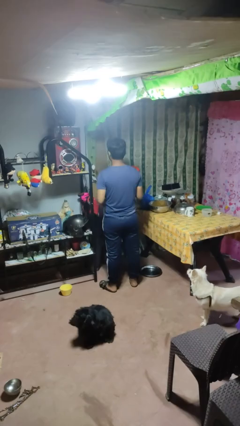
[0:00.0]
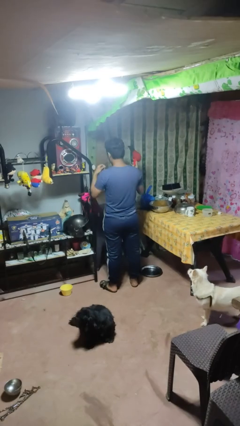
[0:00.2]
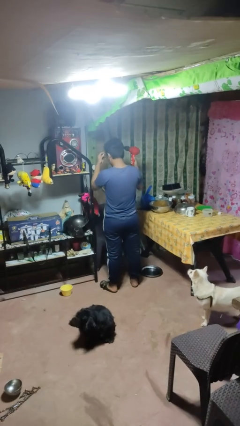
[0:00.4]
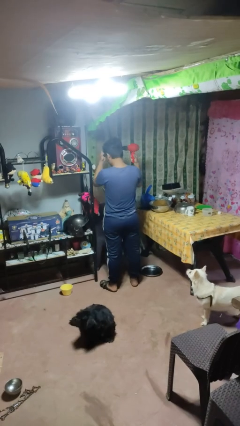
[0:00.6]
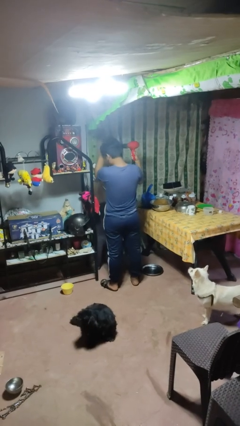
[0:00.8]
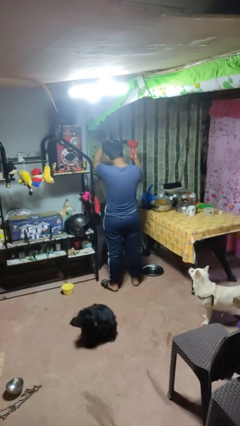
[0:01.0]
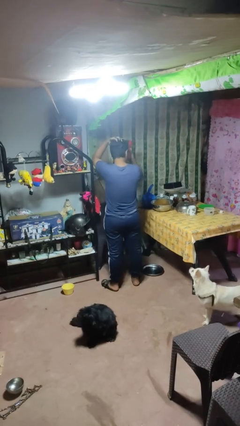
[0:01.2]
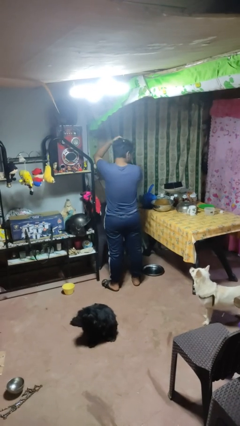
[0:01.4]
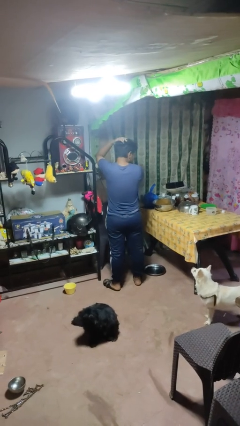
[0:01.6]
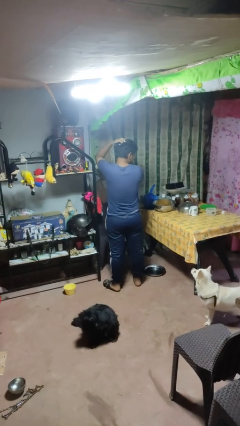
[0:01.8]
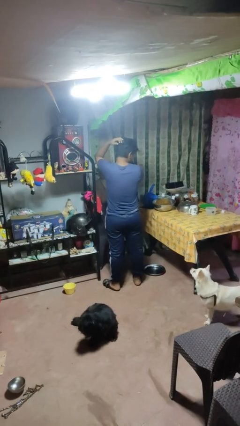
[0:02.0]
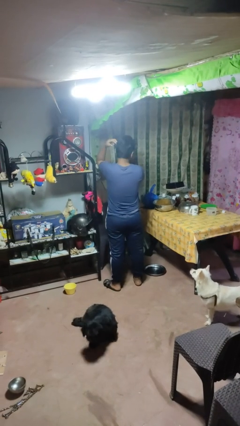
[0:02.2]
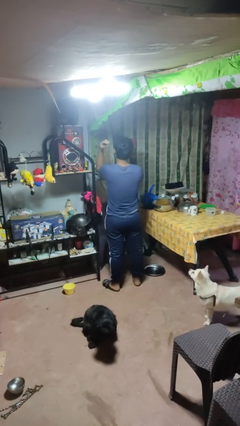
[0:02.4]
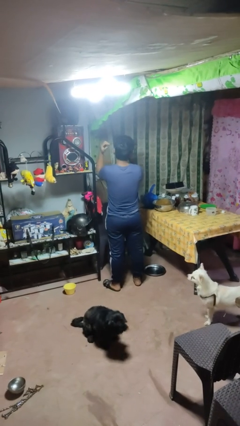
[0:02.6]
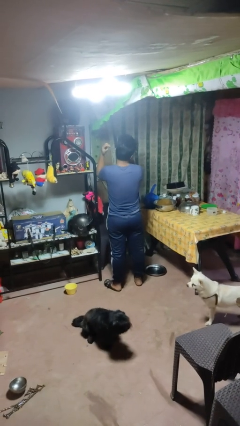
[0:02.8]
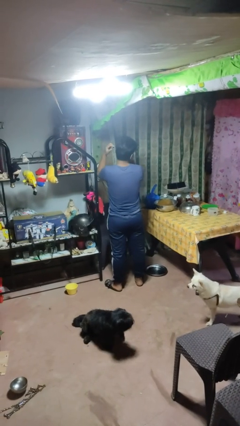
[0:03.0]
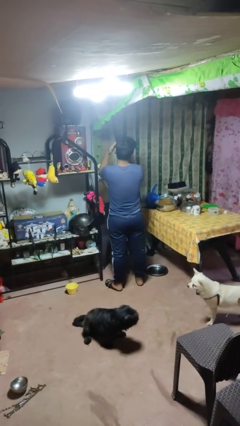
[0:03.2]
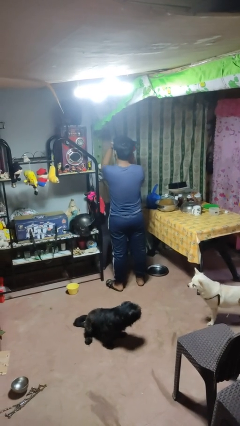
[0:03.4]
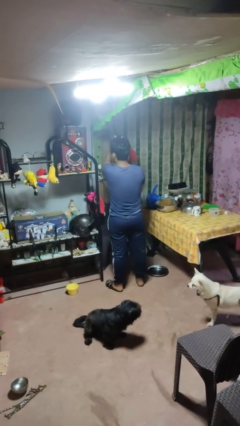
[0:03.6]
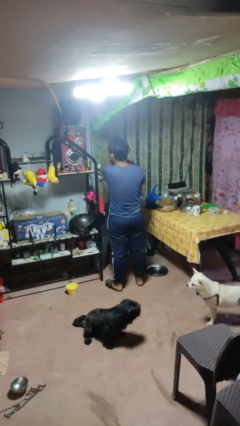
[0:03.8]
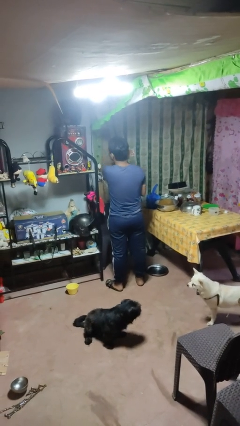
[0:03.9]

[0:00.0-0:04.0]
person dries hair with hairdryer

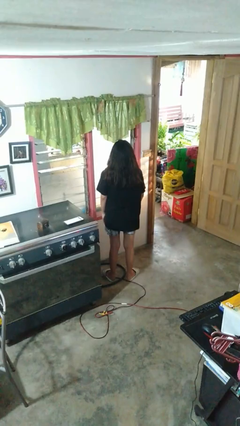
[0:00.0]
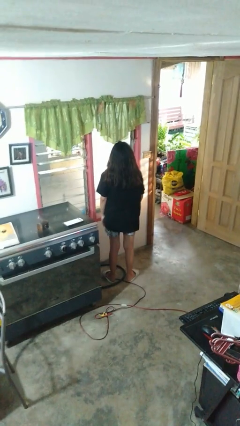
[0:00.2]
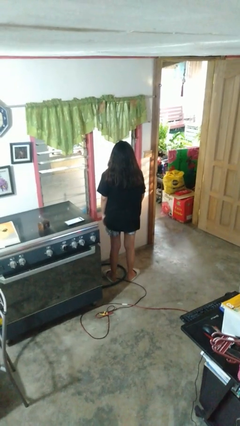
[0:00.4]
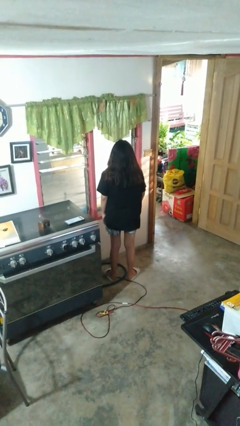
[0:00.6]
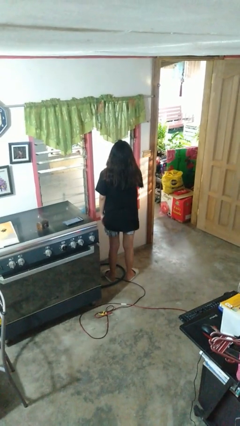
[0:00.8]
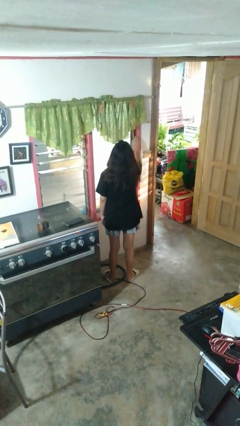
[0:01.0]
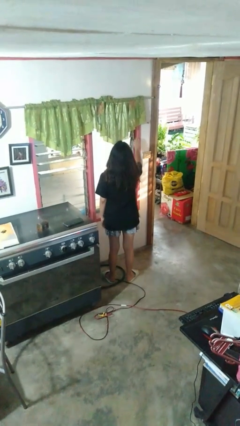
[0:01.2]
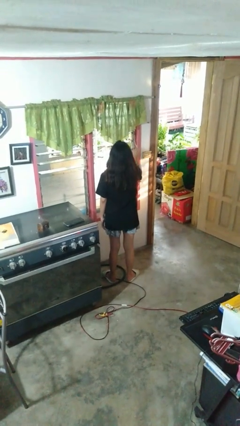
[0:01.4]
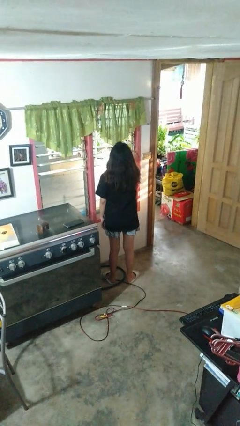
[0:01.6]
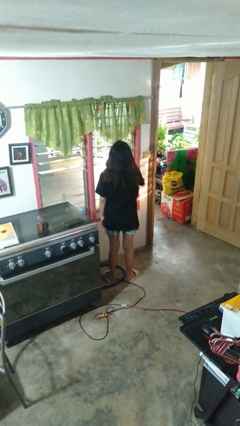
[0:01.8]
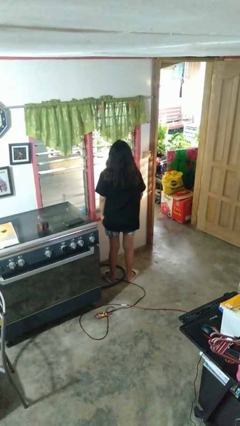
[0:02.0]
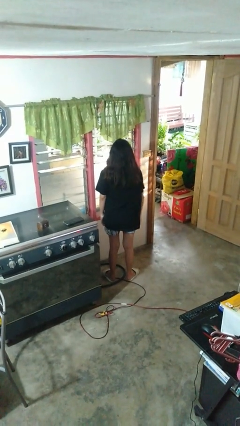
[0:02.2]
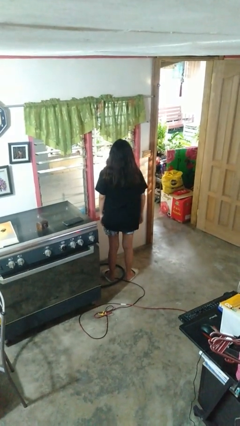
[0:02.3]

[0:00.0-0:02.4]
person opens home window

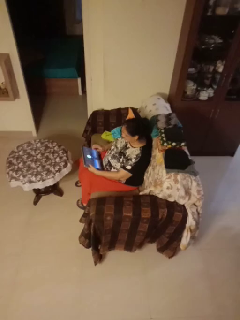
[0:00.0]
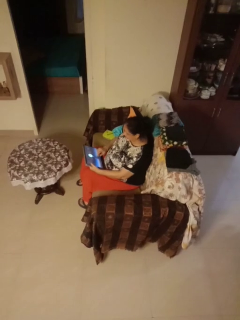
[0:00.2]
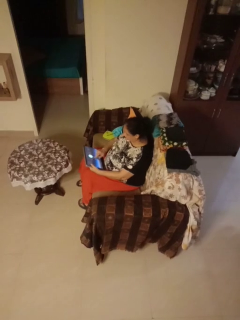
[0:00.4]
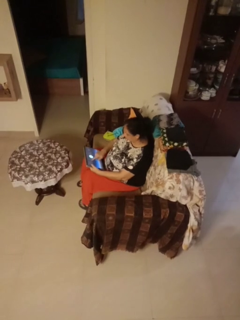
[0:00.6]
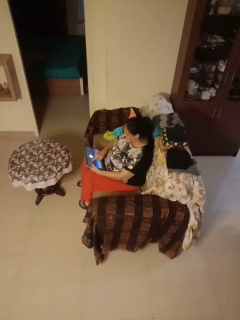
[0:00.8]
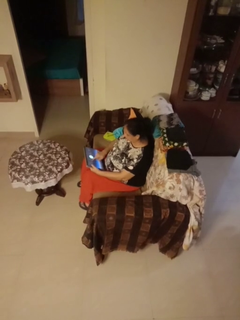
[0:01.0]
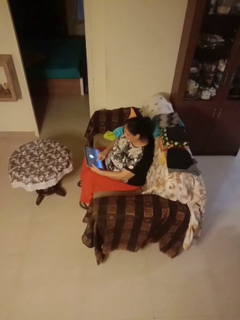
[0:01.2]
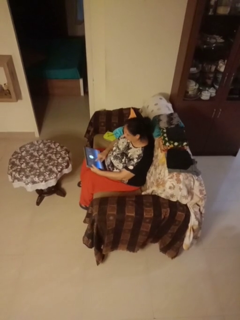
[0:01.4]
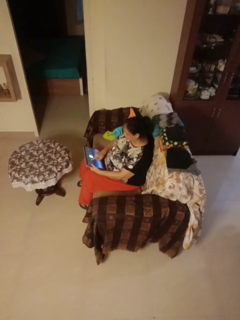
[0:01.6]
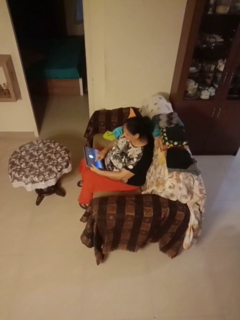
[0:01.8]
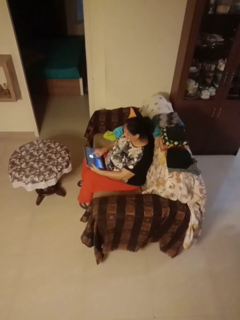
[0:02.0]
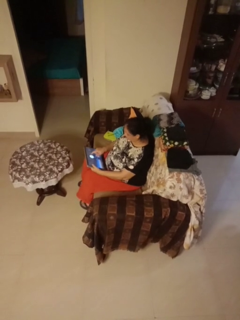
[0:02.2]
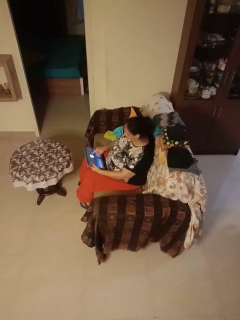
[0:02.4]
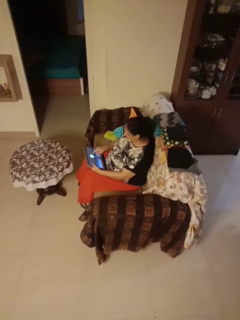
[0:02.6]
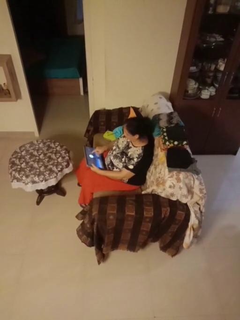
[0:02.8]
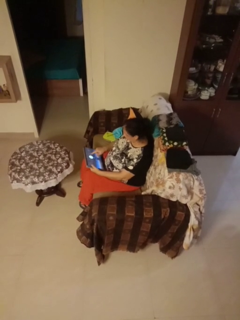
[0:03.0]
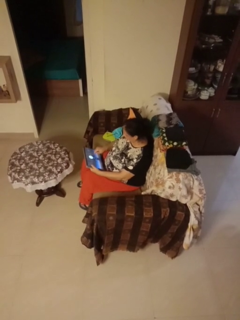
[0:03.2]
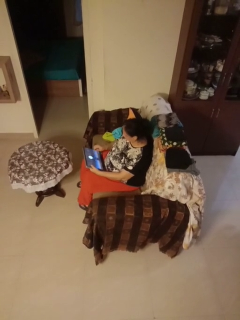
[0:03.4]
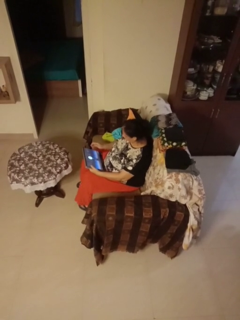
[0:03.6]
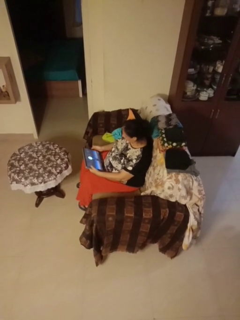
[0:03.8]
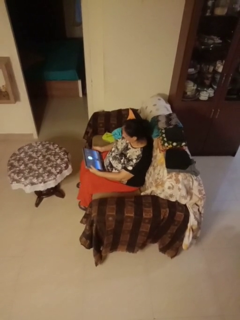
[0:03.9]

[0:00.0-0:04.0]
person interacts with tablet

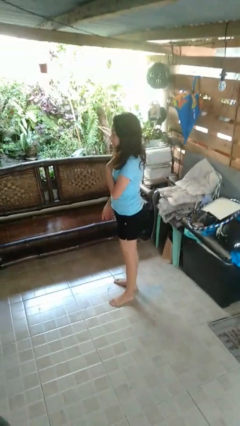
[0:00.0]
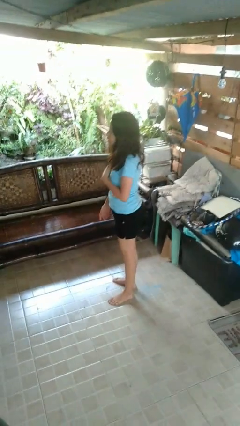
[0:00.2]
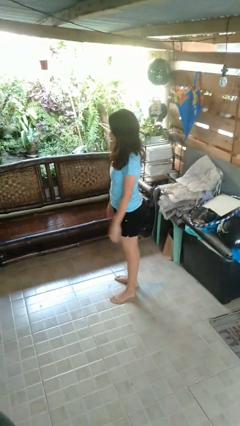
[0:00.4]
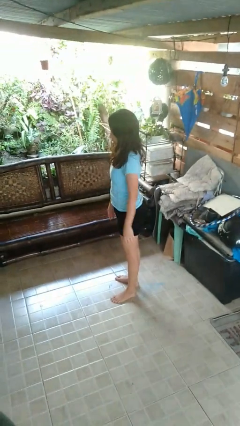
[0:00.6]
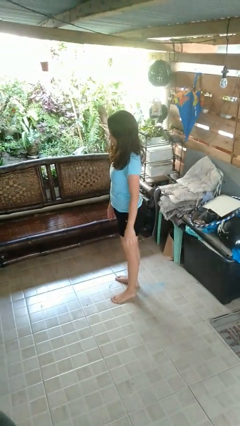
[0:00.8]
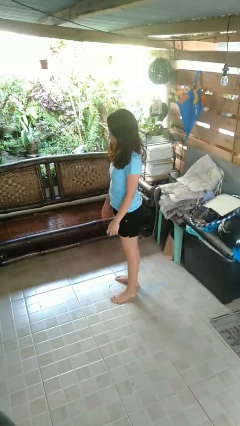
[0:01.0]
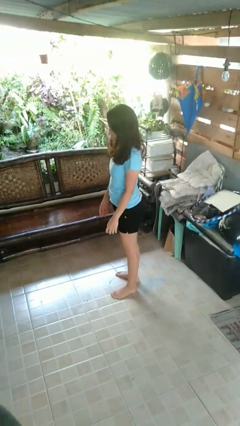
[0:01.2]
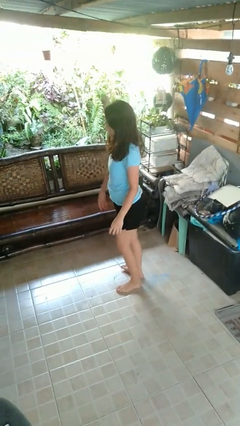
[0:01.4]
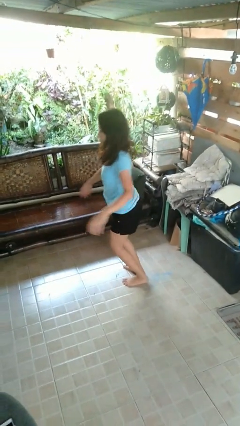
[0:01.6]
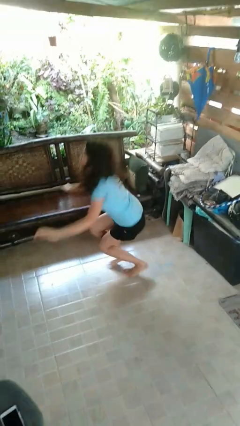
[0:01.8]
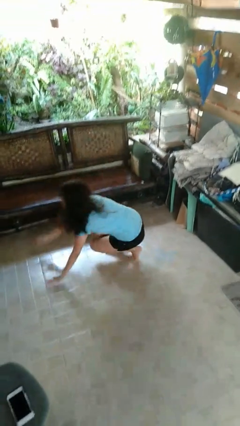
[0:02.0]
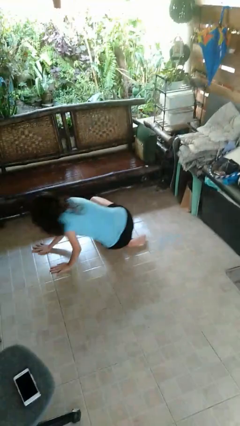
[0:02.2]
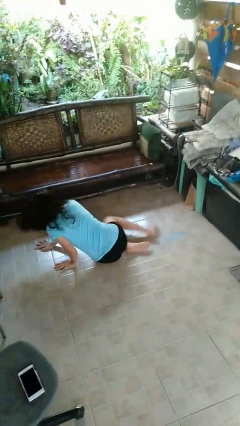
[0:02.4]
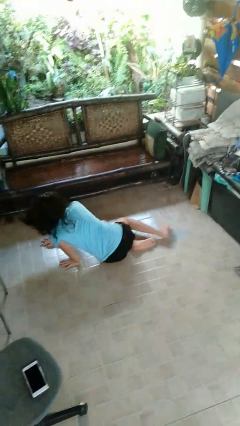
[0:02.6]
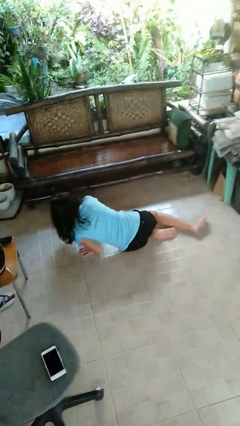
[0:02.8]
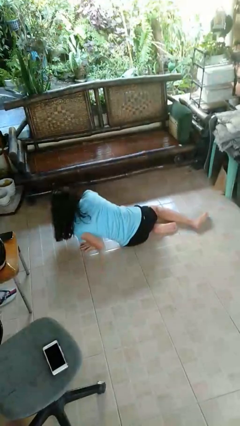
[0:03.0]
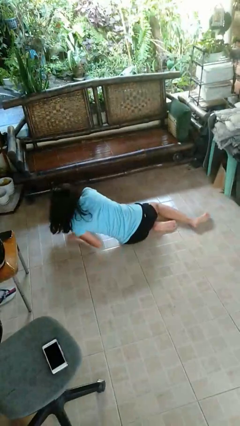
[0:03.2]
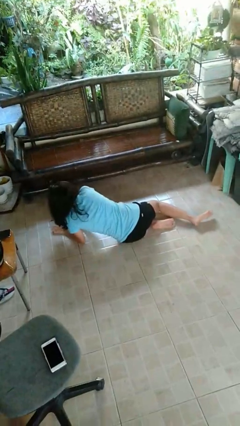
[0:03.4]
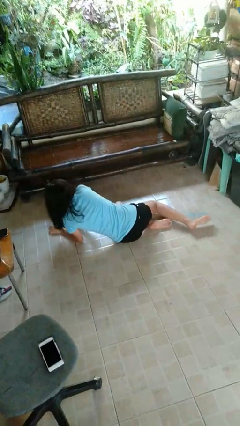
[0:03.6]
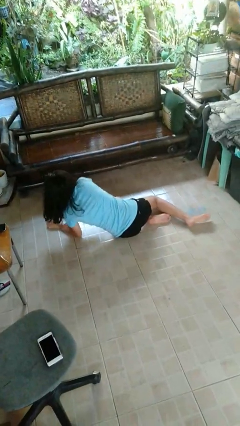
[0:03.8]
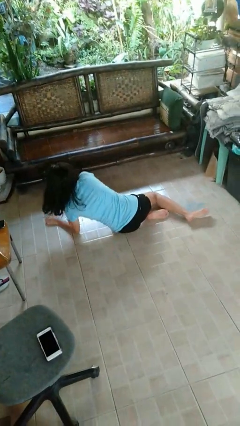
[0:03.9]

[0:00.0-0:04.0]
person falls while standing

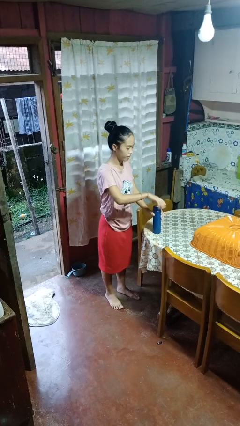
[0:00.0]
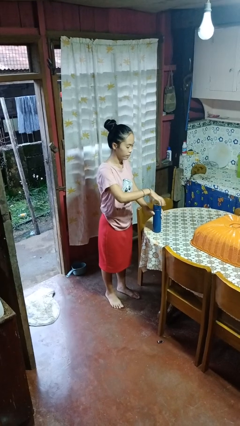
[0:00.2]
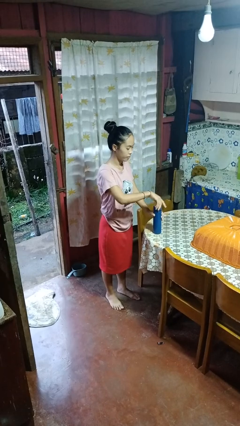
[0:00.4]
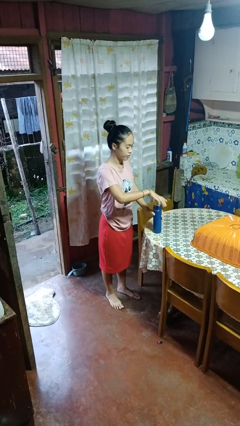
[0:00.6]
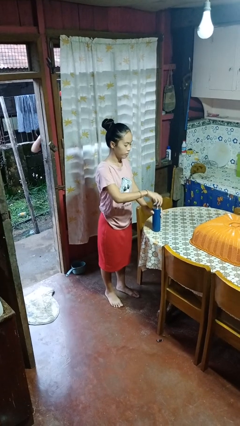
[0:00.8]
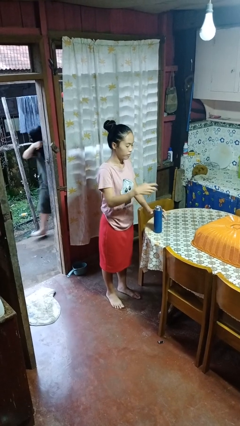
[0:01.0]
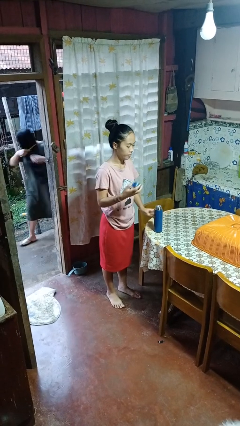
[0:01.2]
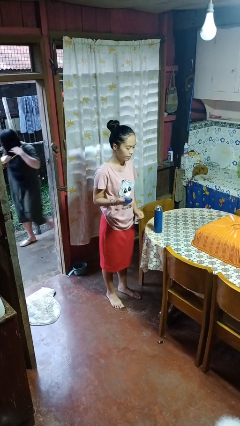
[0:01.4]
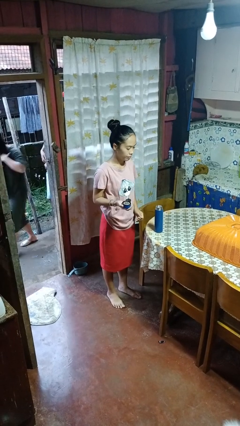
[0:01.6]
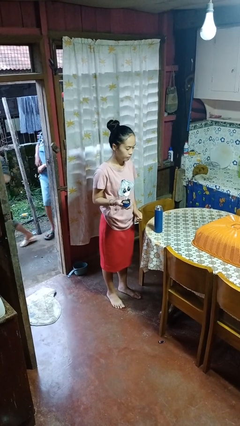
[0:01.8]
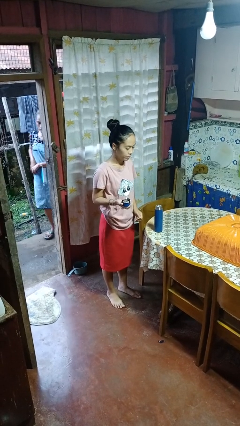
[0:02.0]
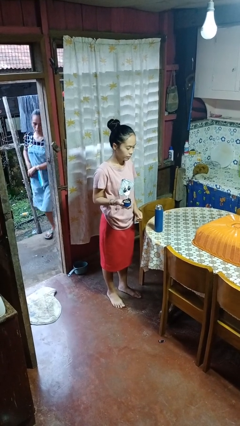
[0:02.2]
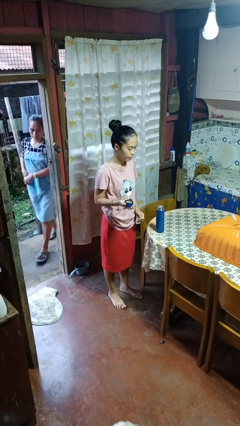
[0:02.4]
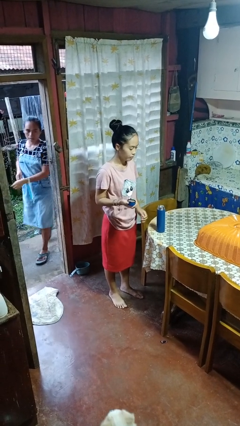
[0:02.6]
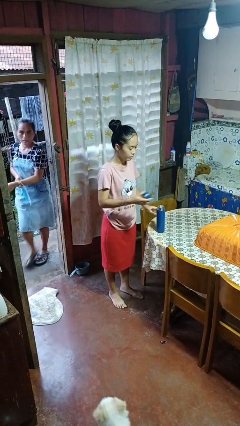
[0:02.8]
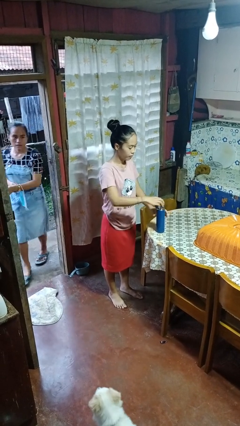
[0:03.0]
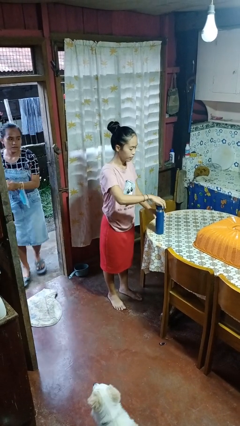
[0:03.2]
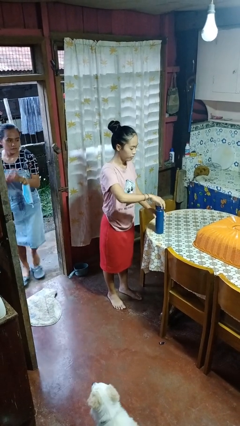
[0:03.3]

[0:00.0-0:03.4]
person opens jar

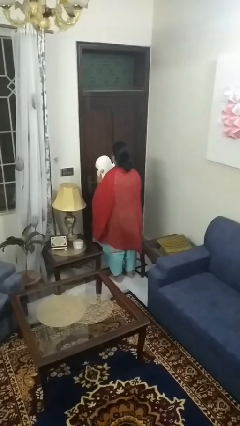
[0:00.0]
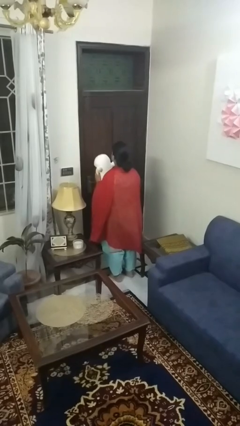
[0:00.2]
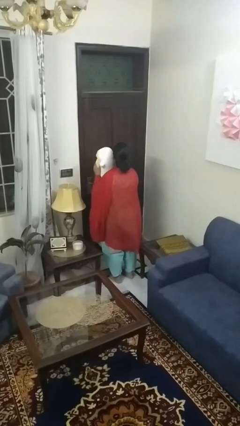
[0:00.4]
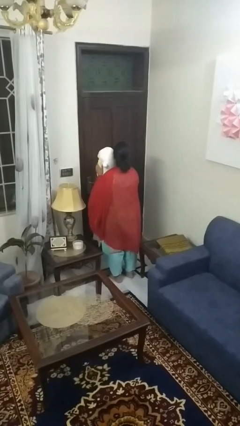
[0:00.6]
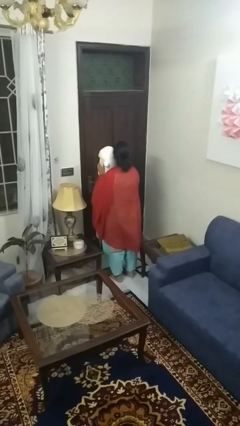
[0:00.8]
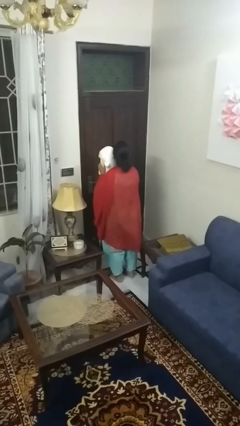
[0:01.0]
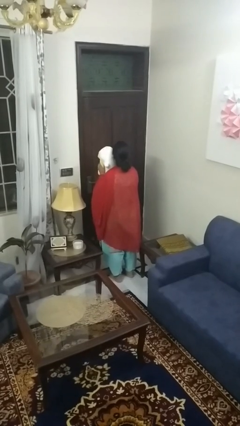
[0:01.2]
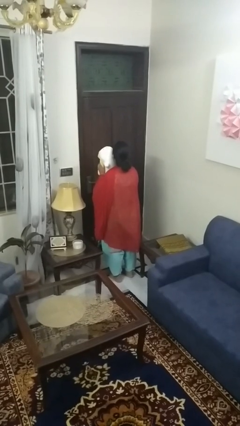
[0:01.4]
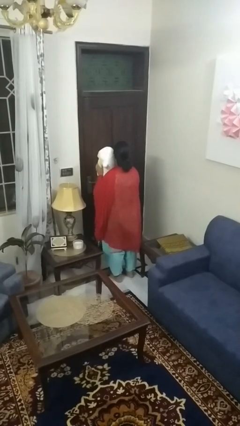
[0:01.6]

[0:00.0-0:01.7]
person hugs stuffed animal
